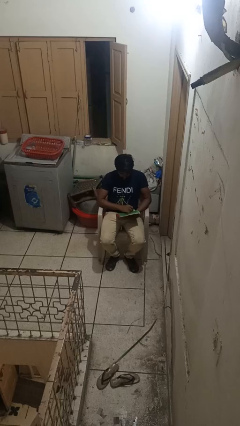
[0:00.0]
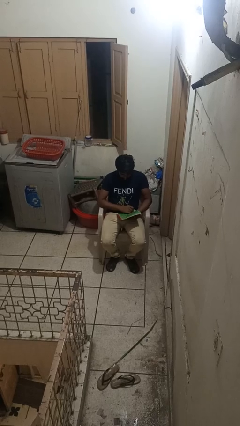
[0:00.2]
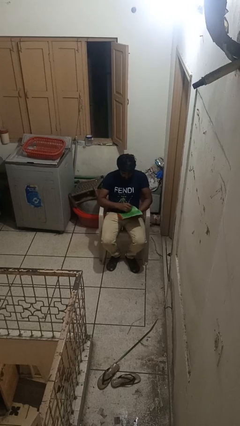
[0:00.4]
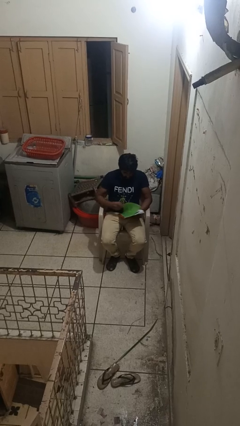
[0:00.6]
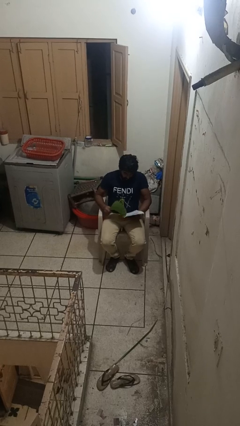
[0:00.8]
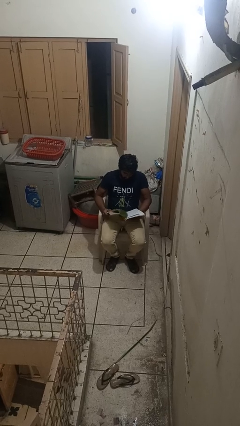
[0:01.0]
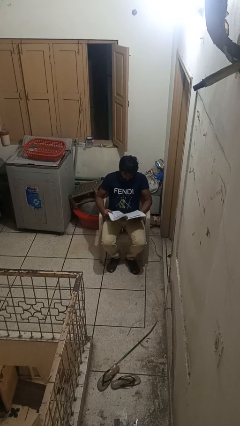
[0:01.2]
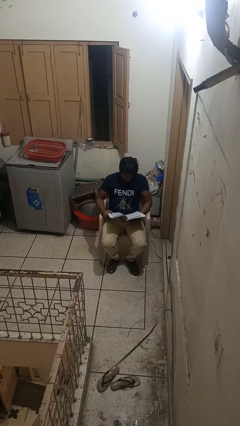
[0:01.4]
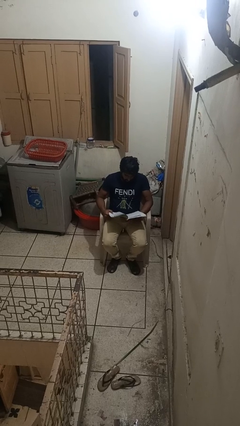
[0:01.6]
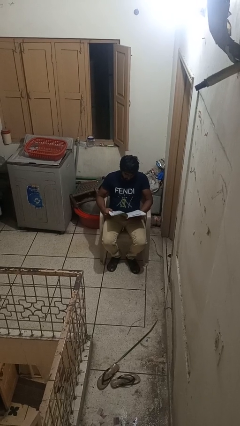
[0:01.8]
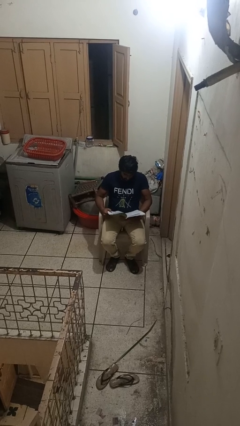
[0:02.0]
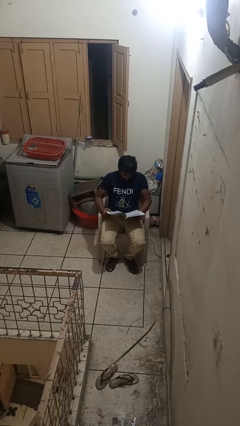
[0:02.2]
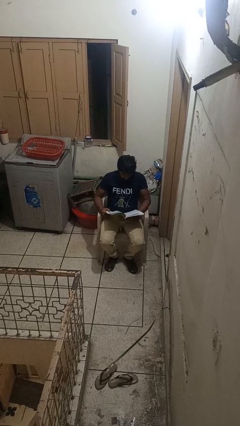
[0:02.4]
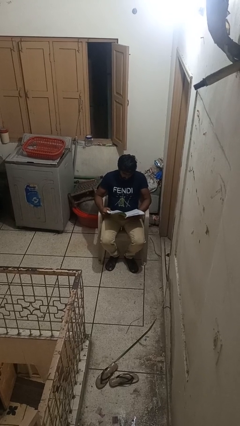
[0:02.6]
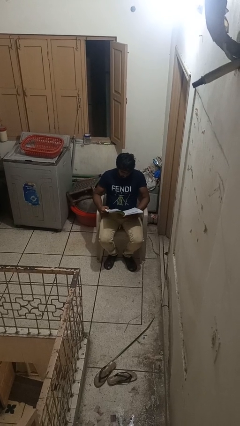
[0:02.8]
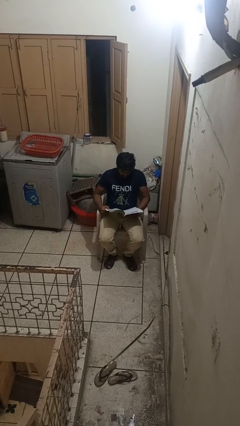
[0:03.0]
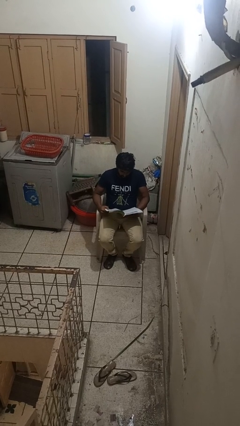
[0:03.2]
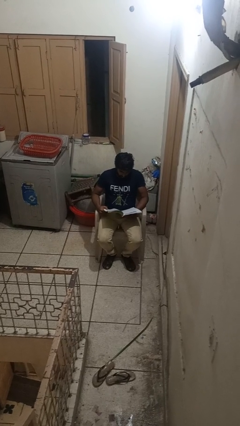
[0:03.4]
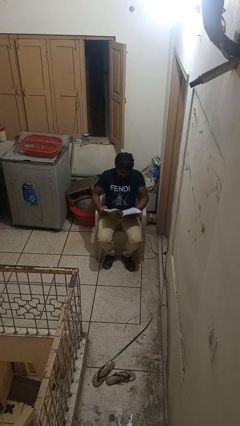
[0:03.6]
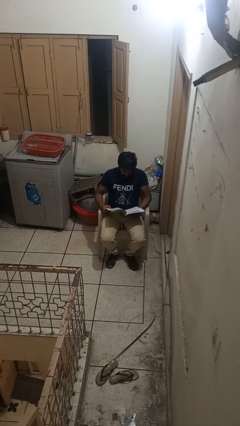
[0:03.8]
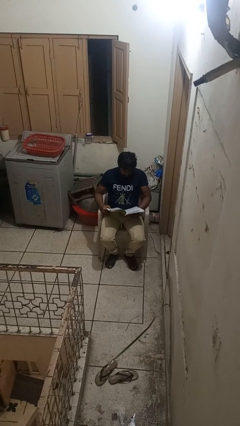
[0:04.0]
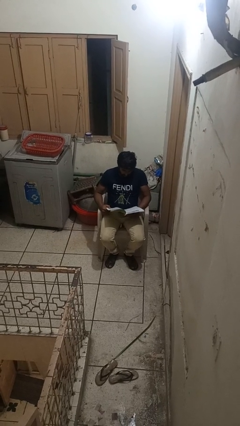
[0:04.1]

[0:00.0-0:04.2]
person reads magazine

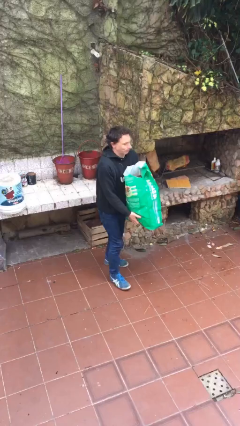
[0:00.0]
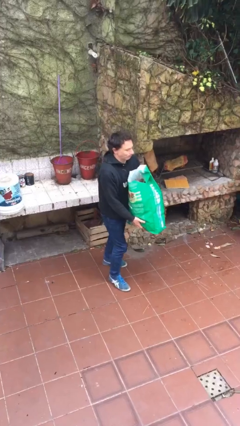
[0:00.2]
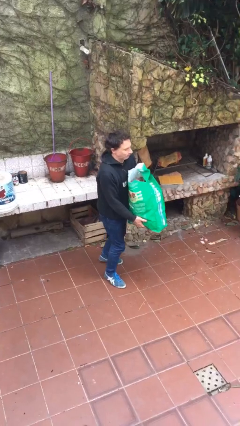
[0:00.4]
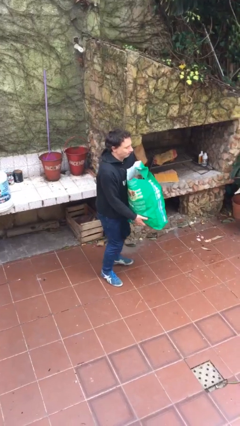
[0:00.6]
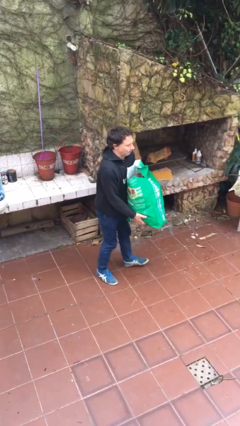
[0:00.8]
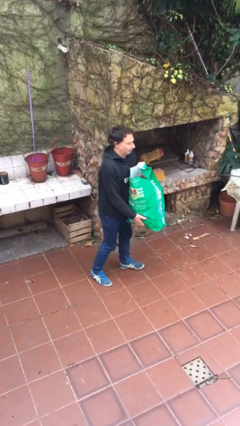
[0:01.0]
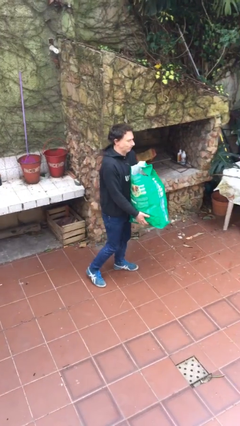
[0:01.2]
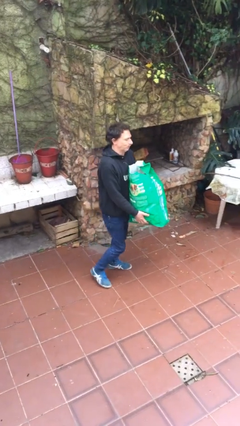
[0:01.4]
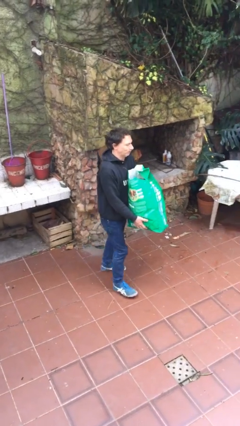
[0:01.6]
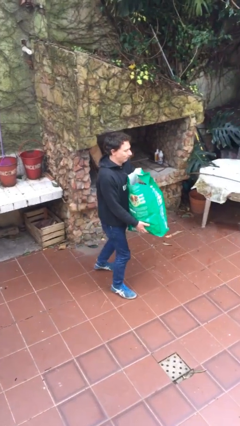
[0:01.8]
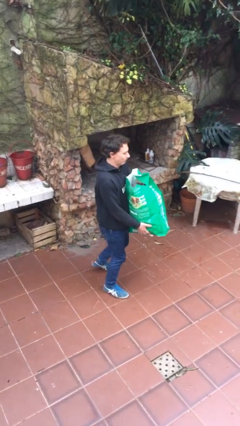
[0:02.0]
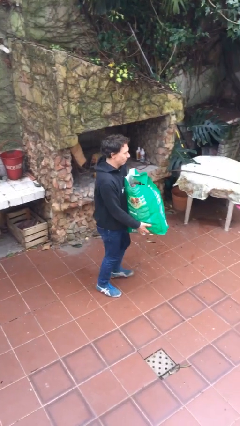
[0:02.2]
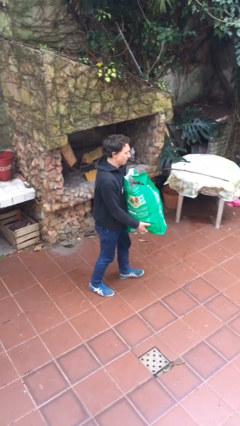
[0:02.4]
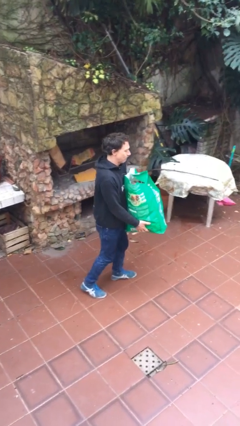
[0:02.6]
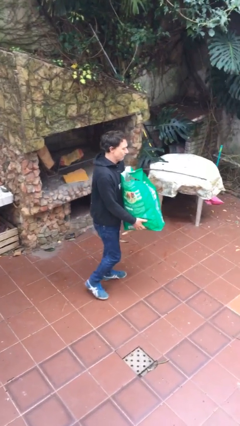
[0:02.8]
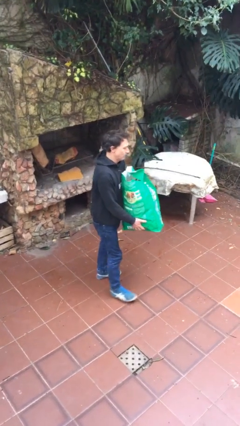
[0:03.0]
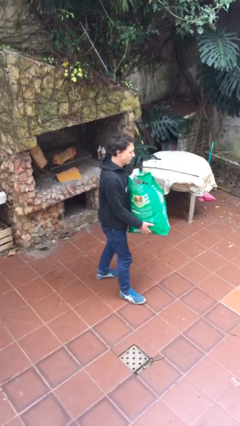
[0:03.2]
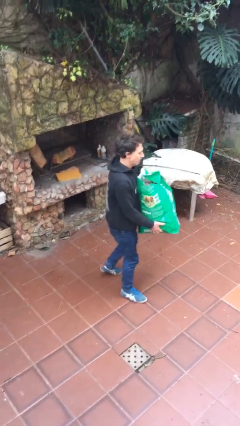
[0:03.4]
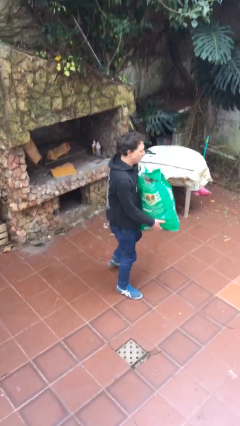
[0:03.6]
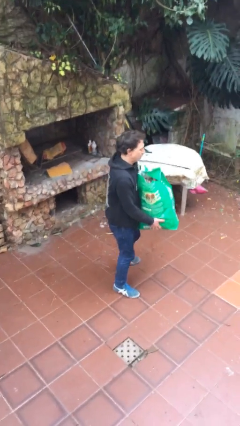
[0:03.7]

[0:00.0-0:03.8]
person carries heavy object

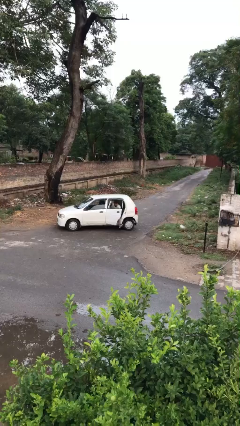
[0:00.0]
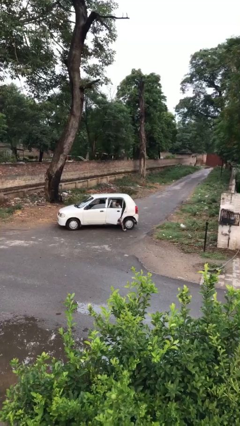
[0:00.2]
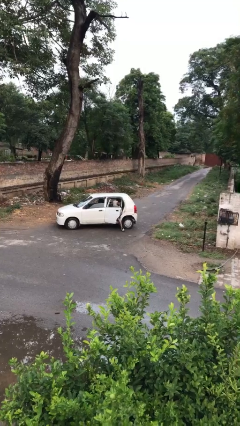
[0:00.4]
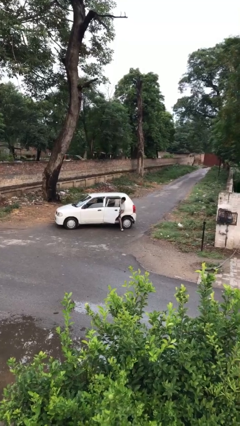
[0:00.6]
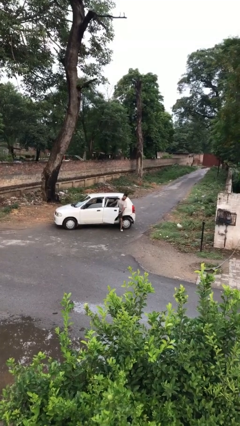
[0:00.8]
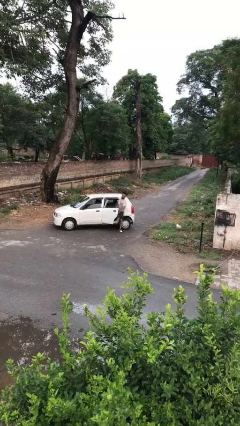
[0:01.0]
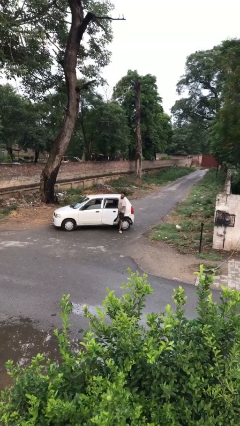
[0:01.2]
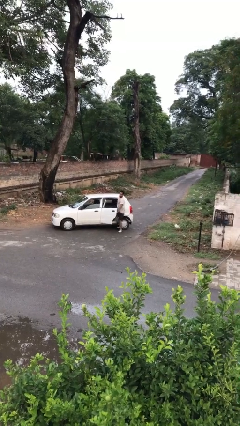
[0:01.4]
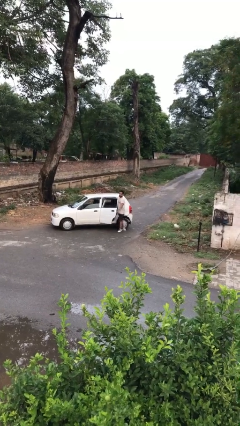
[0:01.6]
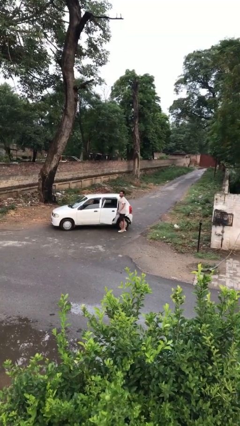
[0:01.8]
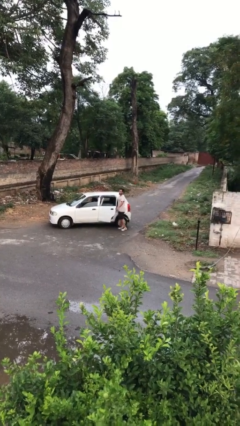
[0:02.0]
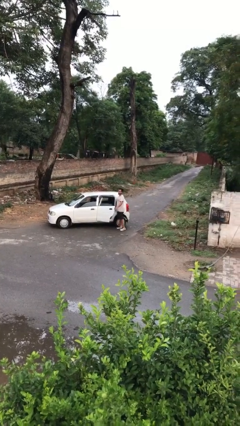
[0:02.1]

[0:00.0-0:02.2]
person exits car

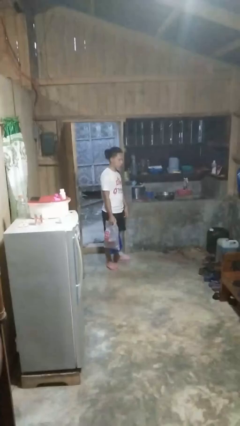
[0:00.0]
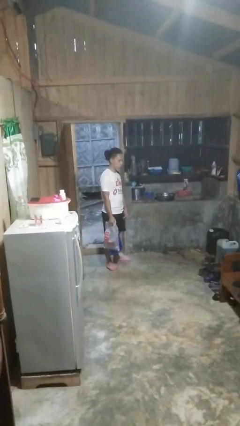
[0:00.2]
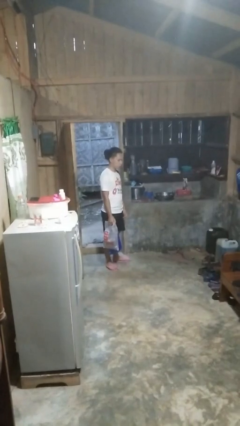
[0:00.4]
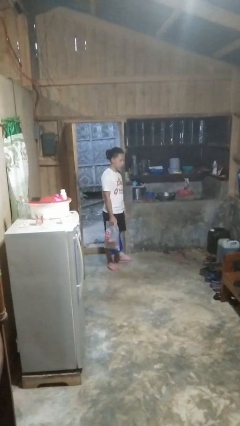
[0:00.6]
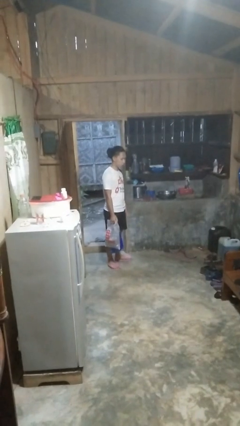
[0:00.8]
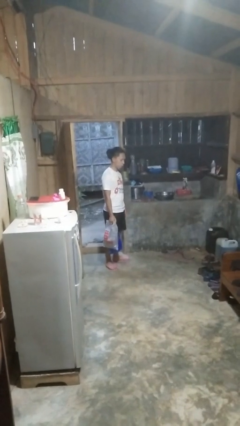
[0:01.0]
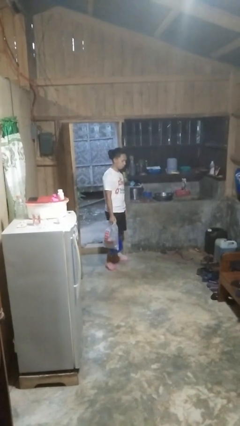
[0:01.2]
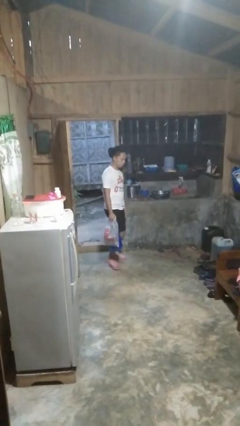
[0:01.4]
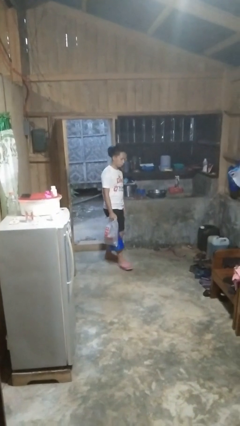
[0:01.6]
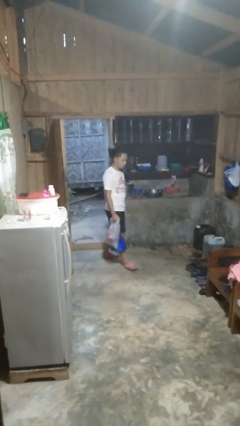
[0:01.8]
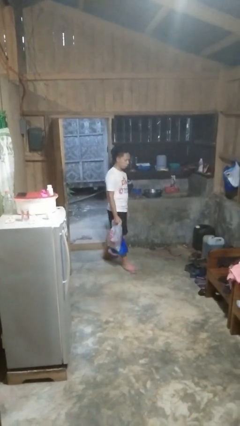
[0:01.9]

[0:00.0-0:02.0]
person carries groceries

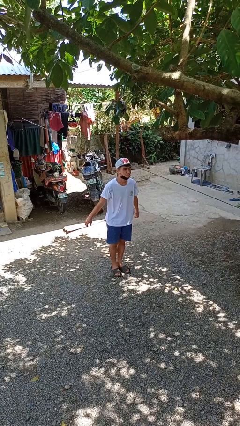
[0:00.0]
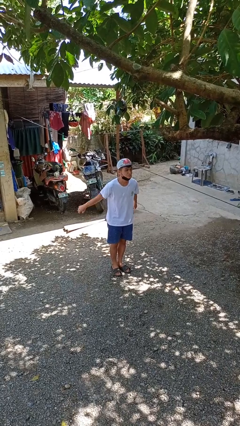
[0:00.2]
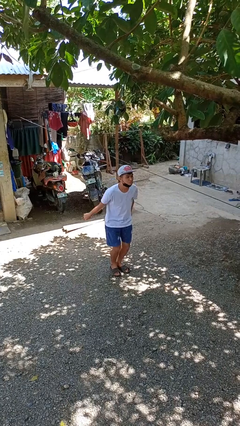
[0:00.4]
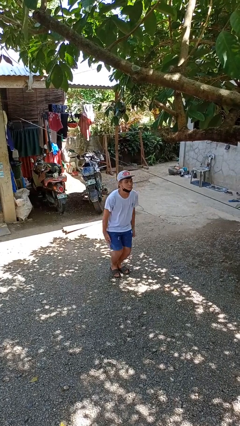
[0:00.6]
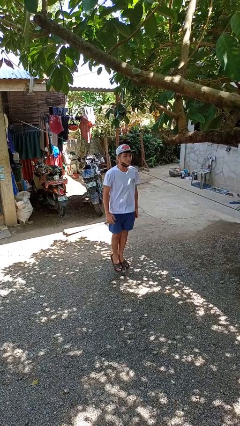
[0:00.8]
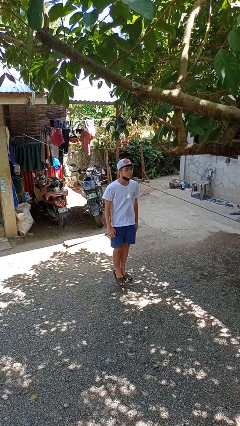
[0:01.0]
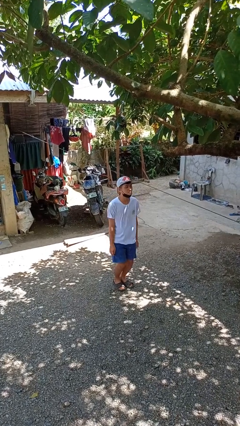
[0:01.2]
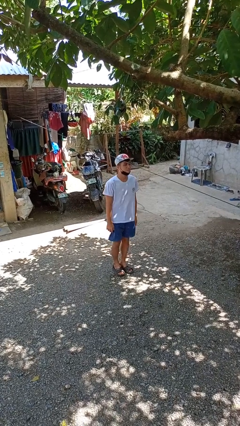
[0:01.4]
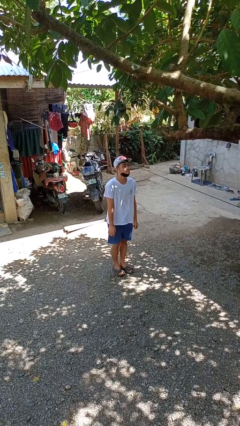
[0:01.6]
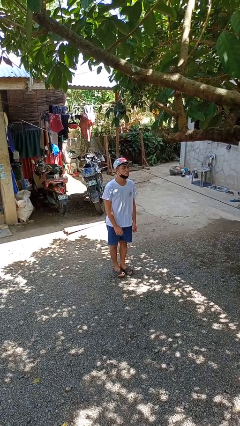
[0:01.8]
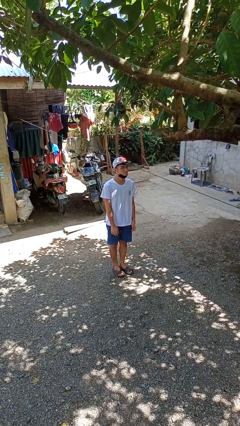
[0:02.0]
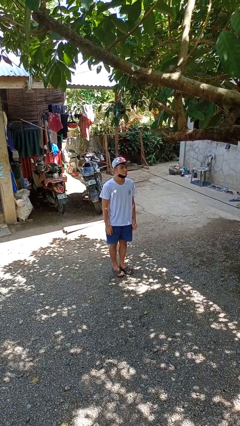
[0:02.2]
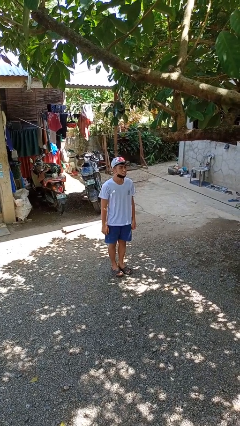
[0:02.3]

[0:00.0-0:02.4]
person jumps

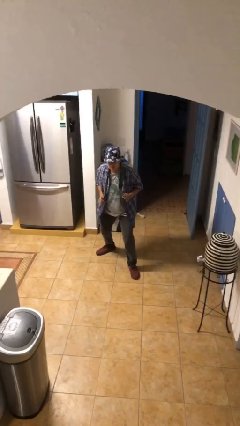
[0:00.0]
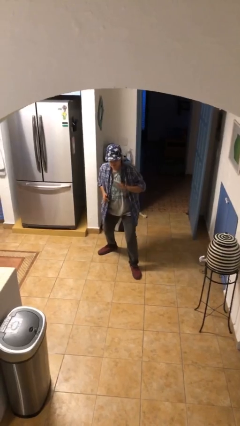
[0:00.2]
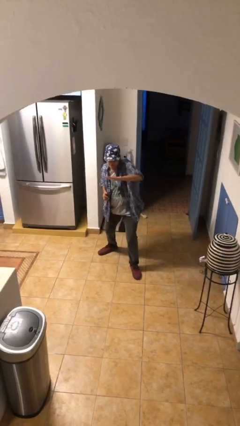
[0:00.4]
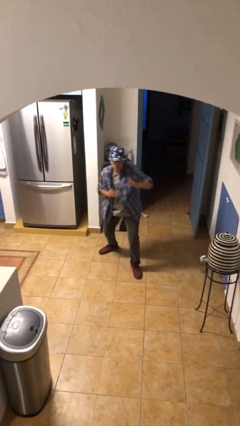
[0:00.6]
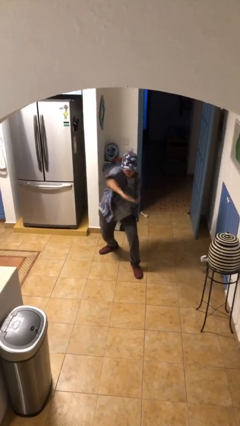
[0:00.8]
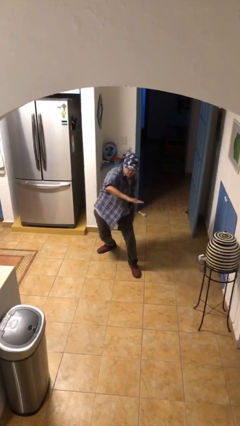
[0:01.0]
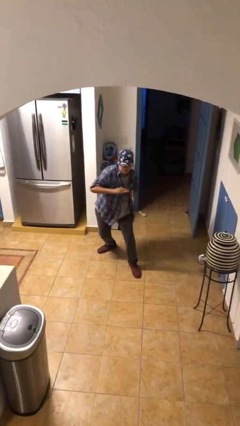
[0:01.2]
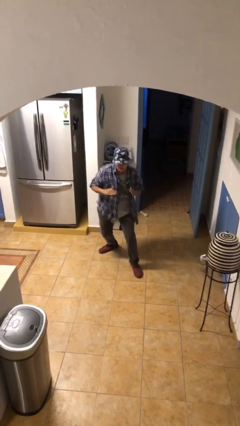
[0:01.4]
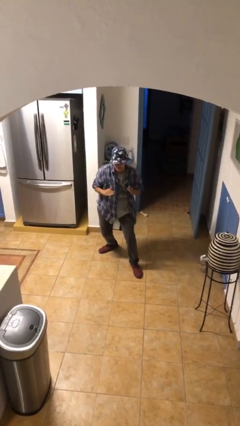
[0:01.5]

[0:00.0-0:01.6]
person karate chop

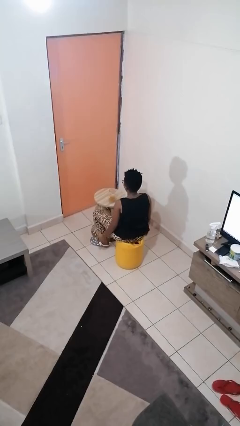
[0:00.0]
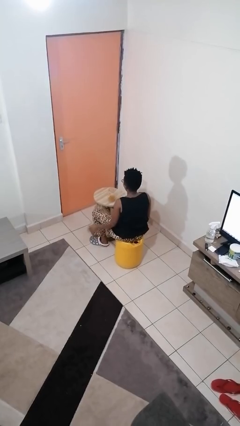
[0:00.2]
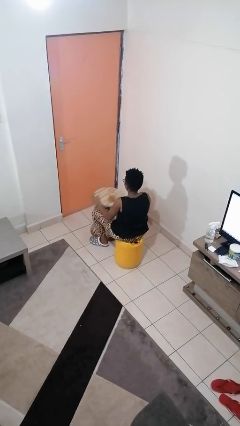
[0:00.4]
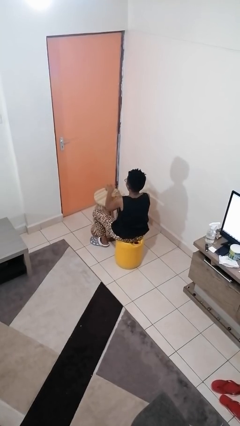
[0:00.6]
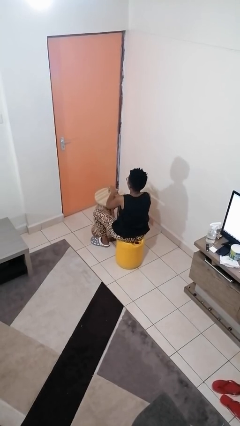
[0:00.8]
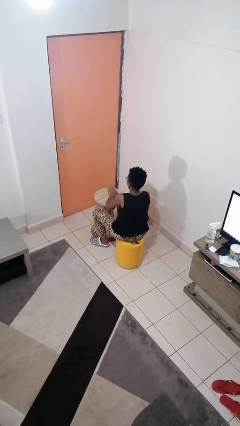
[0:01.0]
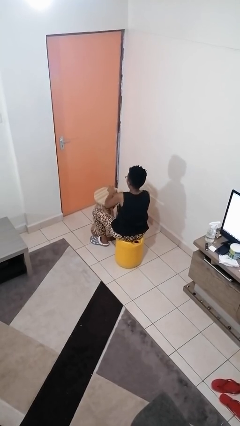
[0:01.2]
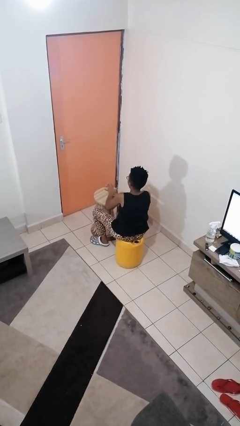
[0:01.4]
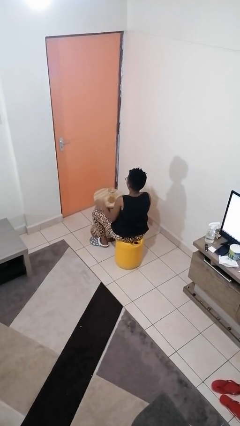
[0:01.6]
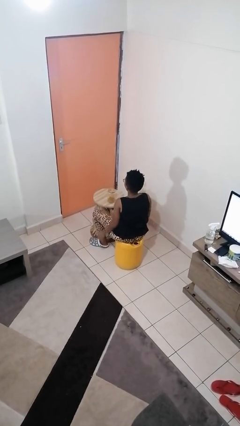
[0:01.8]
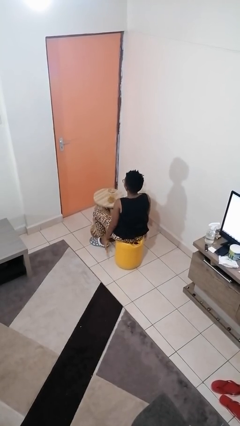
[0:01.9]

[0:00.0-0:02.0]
person closes jar
